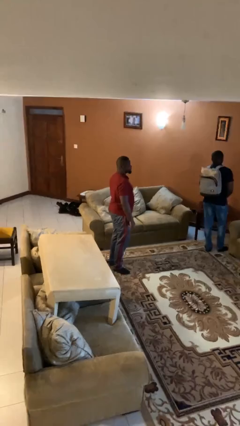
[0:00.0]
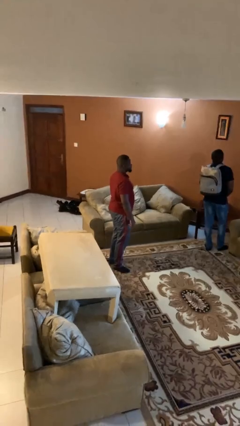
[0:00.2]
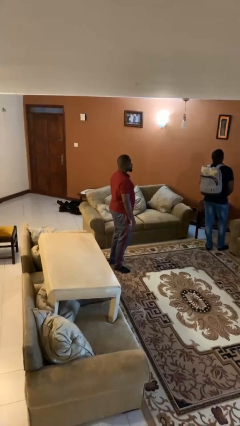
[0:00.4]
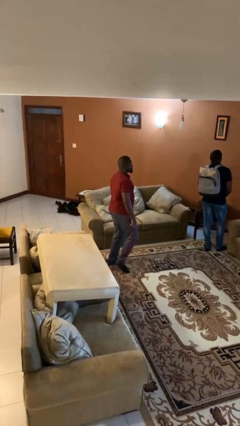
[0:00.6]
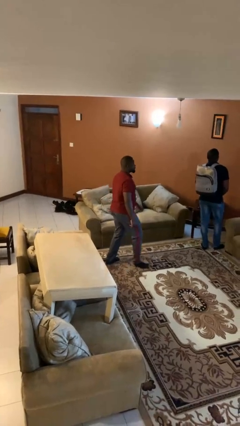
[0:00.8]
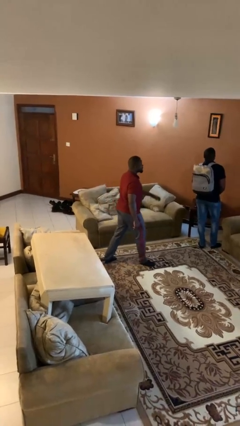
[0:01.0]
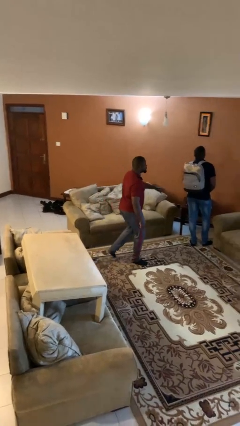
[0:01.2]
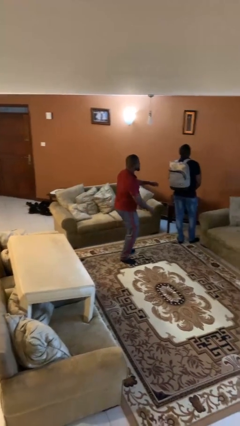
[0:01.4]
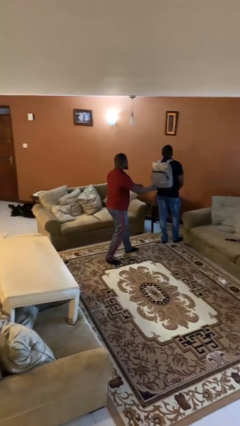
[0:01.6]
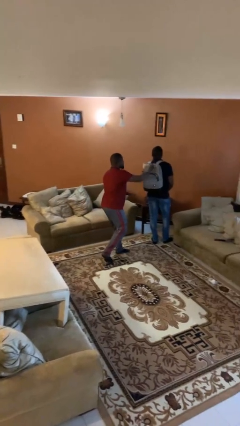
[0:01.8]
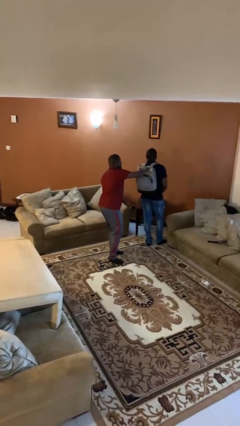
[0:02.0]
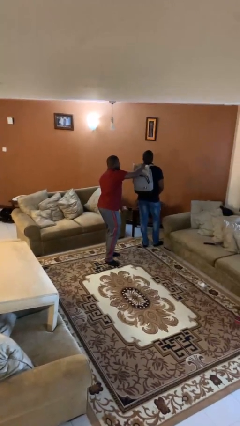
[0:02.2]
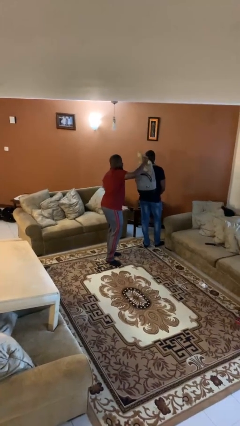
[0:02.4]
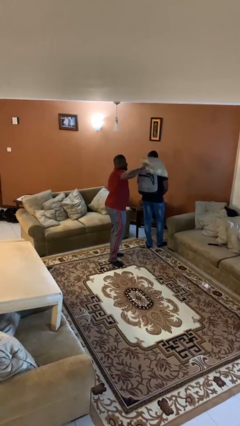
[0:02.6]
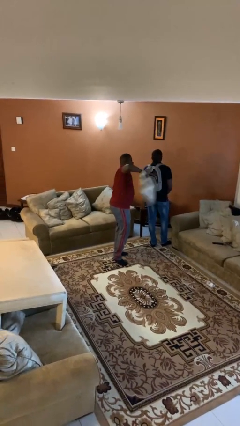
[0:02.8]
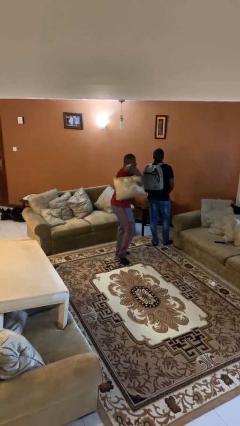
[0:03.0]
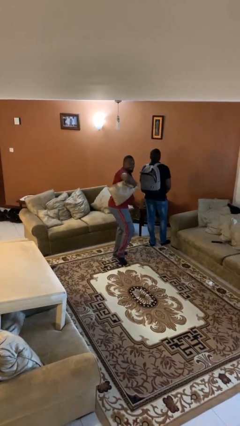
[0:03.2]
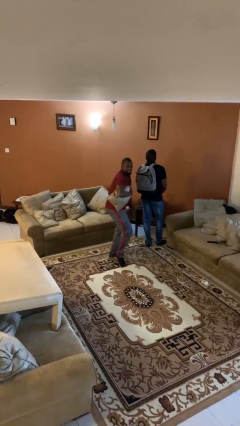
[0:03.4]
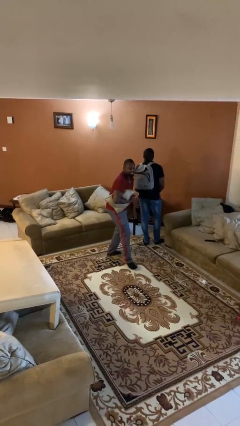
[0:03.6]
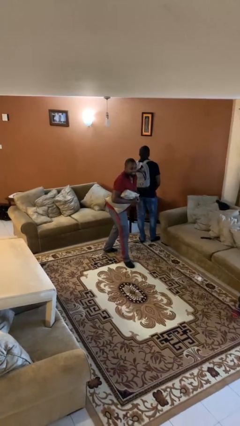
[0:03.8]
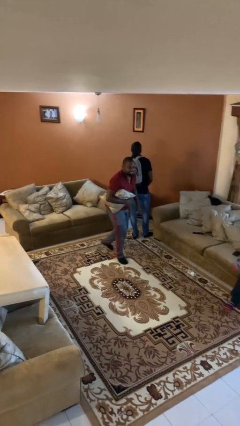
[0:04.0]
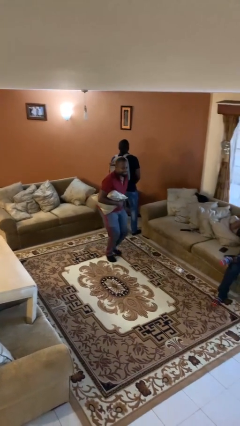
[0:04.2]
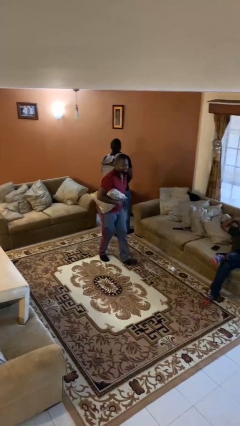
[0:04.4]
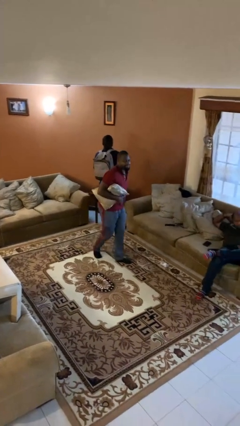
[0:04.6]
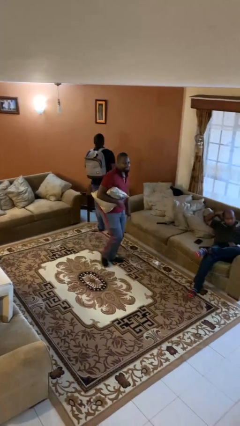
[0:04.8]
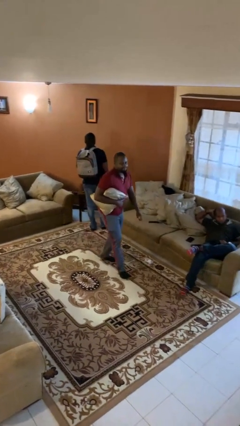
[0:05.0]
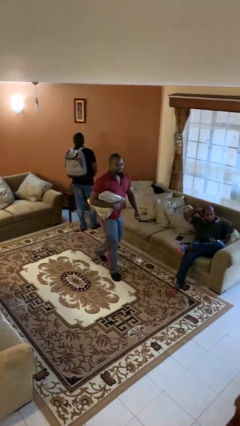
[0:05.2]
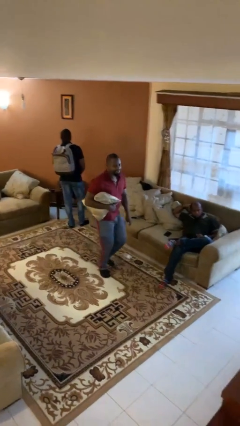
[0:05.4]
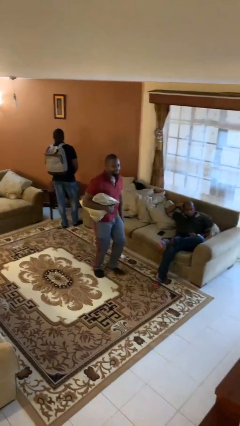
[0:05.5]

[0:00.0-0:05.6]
person steals object from person

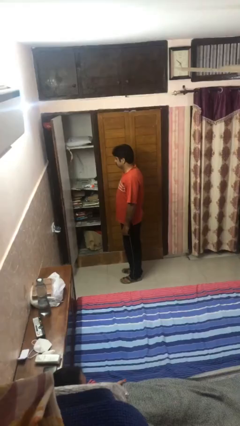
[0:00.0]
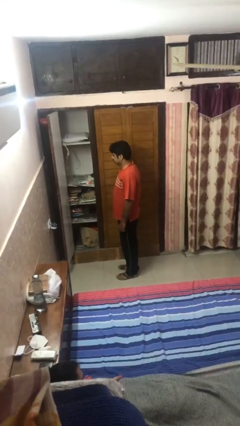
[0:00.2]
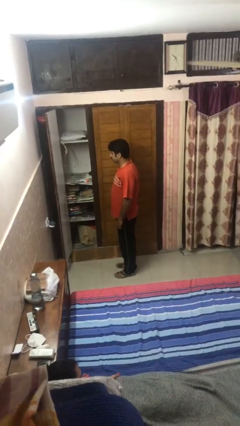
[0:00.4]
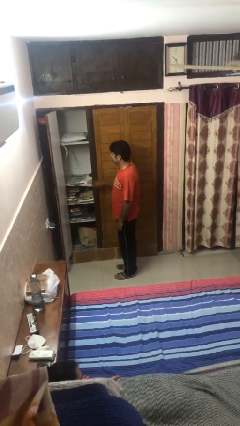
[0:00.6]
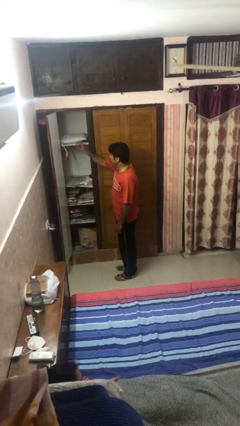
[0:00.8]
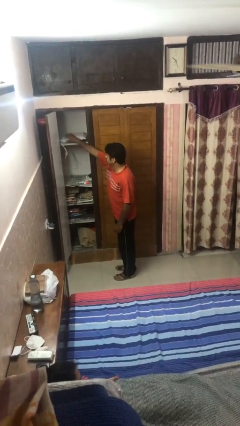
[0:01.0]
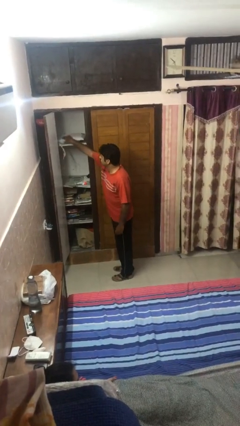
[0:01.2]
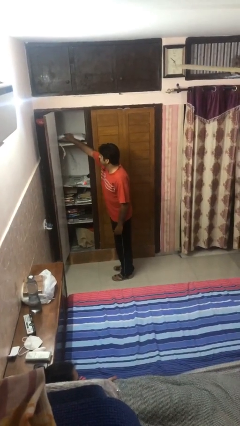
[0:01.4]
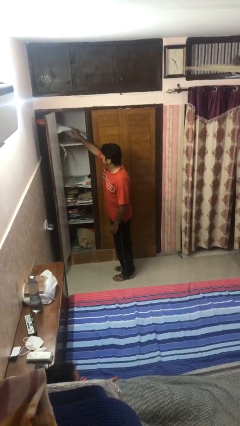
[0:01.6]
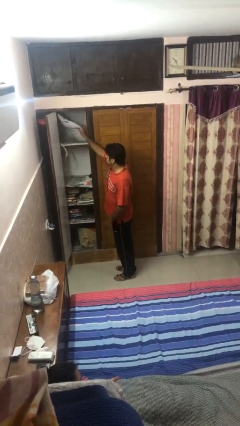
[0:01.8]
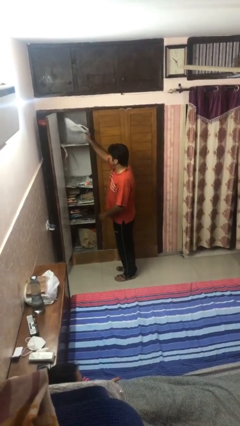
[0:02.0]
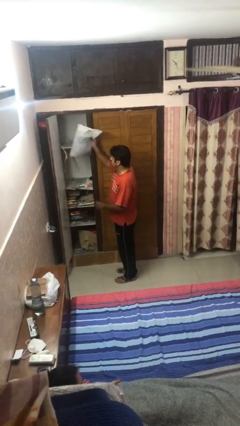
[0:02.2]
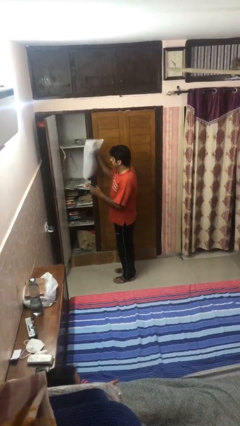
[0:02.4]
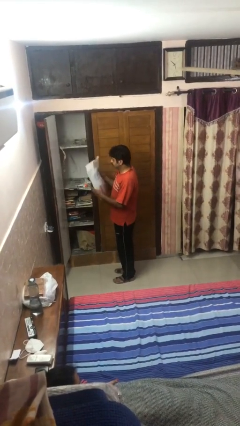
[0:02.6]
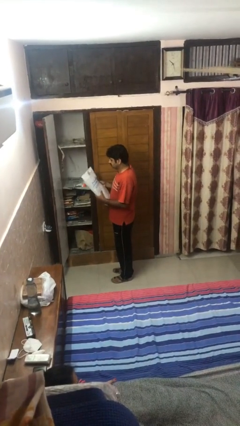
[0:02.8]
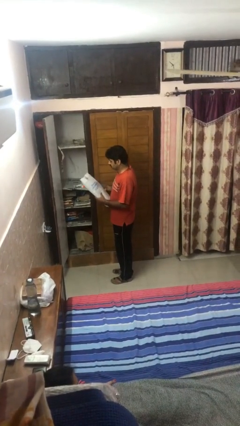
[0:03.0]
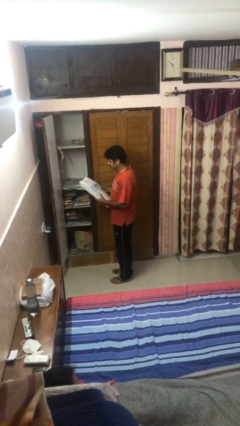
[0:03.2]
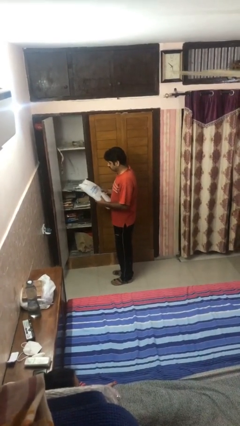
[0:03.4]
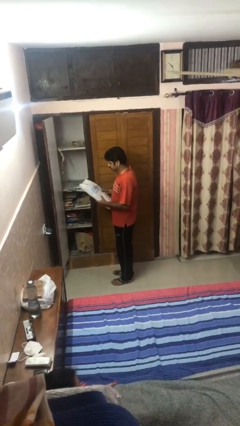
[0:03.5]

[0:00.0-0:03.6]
person picks up object from shelf

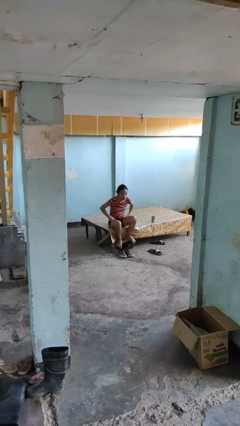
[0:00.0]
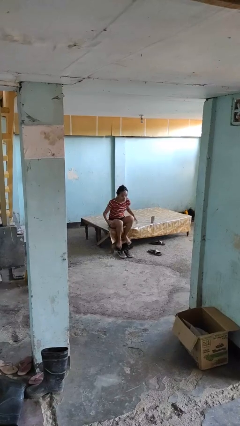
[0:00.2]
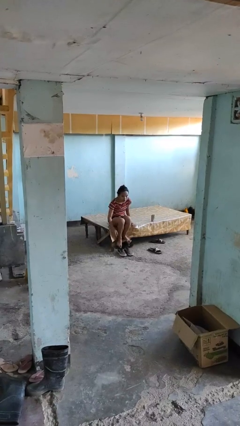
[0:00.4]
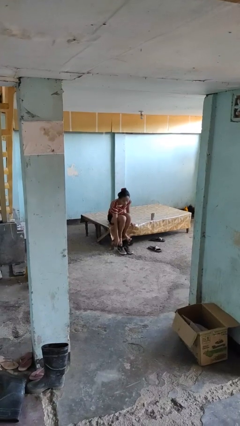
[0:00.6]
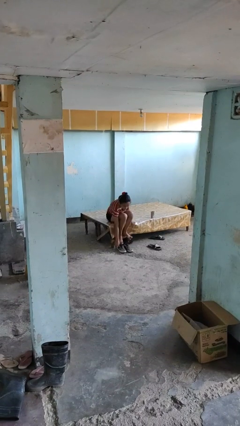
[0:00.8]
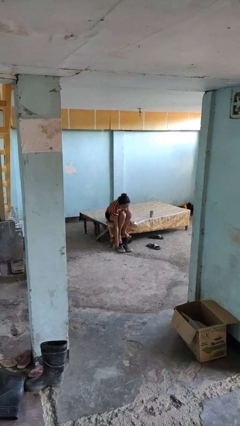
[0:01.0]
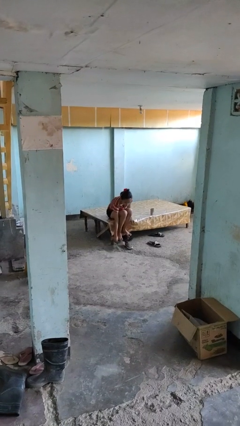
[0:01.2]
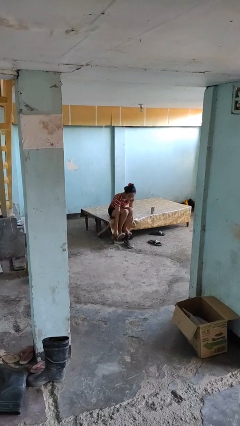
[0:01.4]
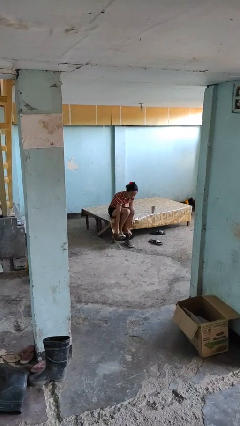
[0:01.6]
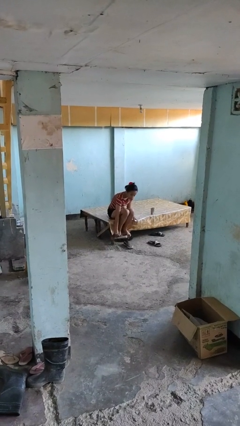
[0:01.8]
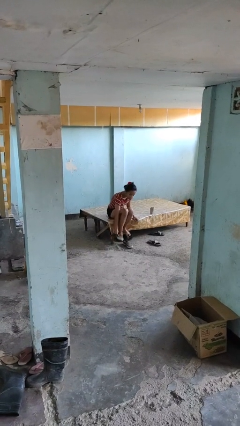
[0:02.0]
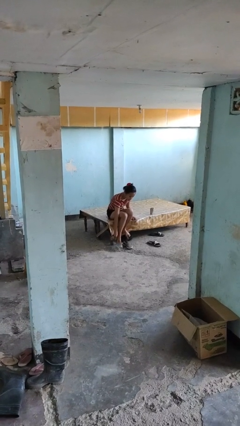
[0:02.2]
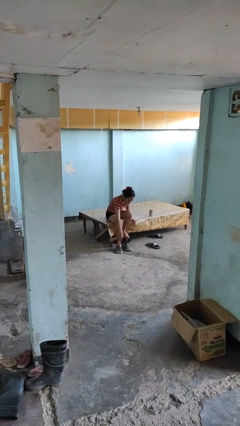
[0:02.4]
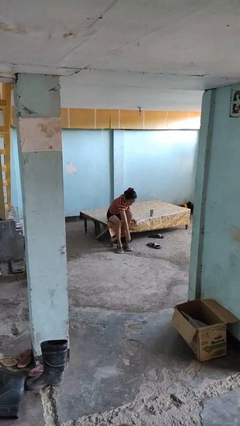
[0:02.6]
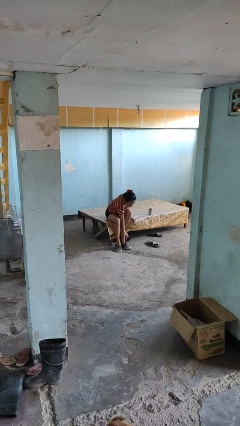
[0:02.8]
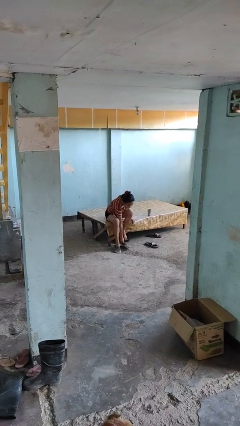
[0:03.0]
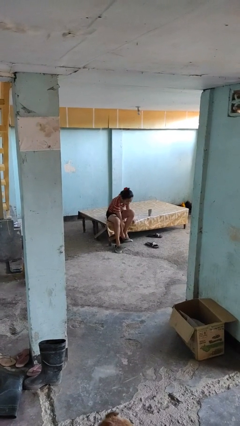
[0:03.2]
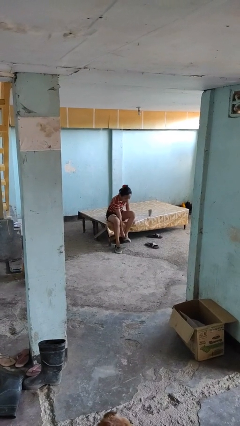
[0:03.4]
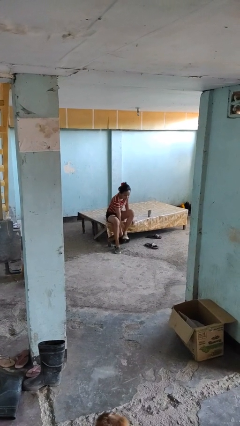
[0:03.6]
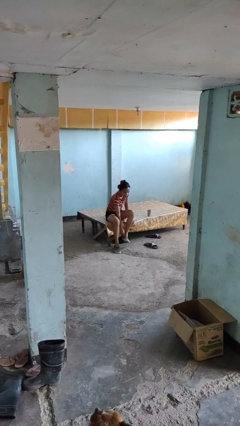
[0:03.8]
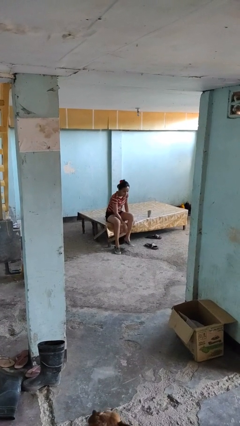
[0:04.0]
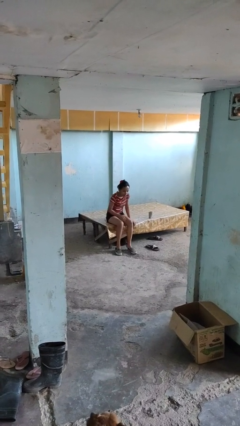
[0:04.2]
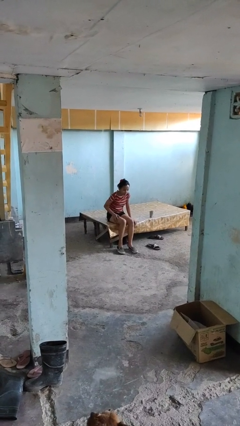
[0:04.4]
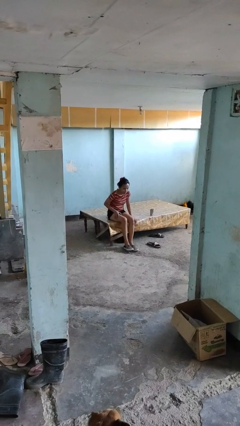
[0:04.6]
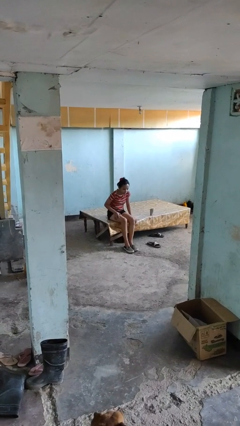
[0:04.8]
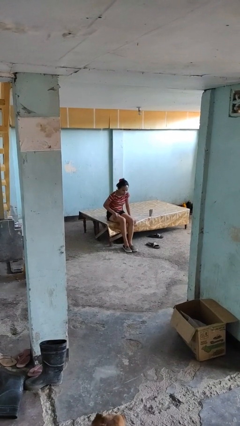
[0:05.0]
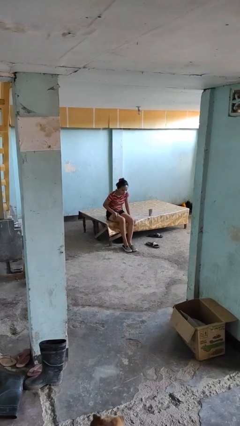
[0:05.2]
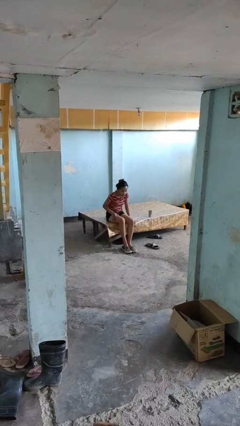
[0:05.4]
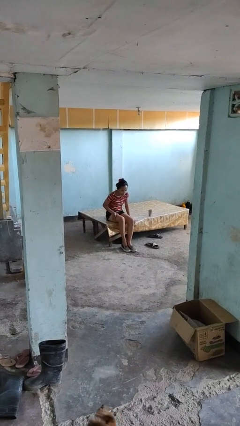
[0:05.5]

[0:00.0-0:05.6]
person puts on shoes

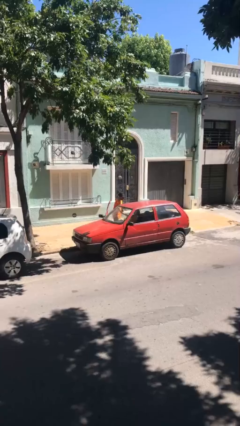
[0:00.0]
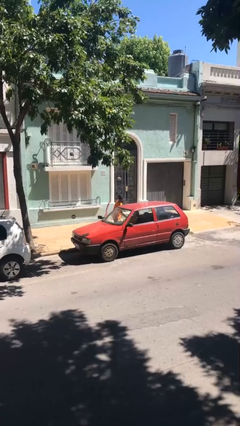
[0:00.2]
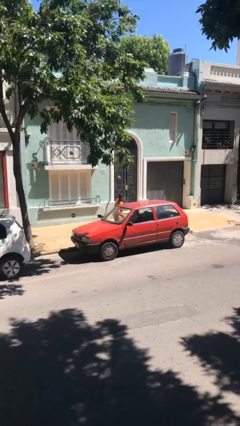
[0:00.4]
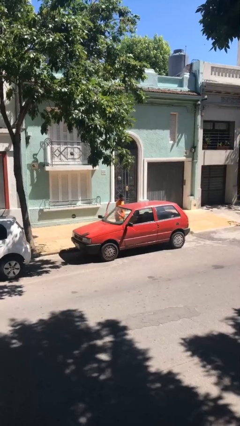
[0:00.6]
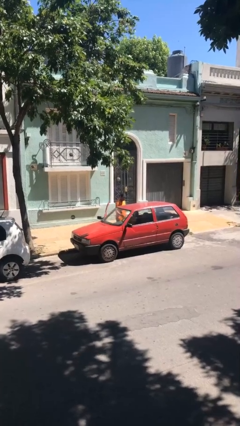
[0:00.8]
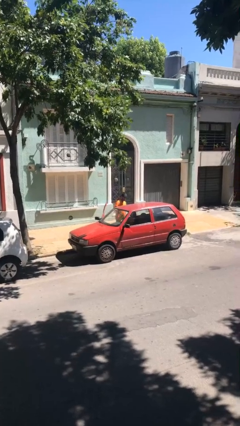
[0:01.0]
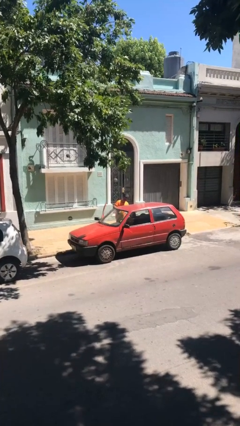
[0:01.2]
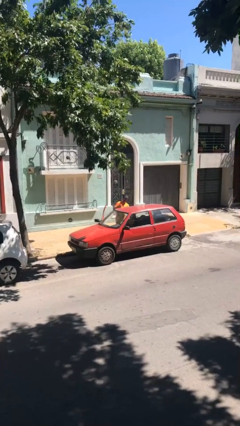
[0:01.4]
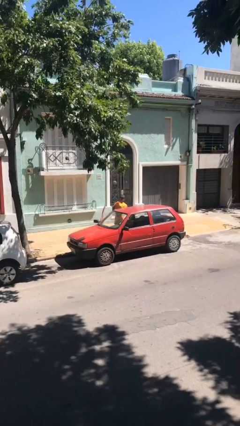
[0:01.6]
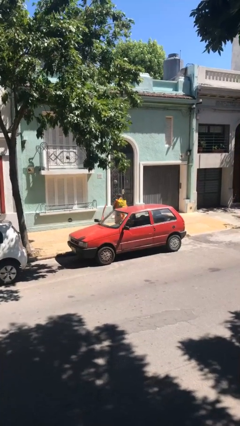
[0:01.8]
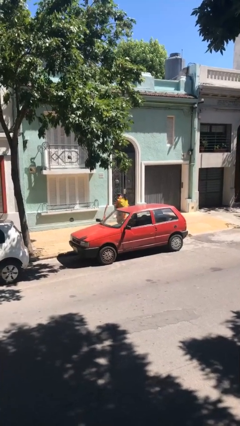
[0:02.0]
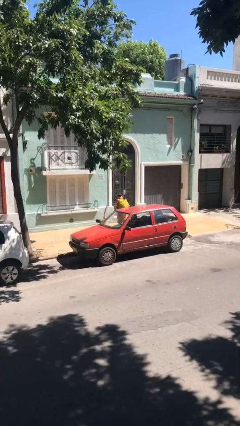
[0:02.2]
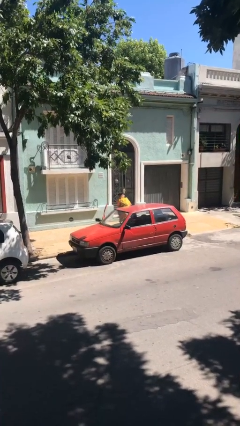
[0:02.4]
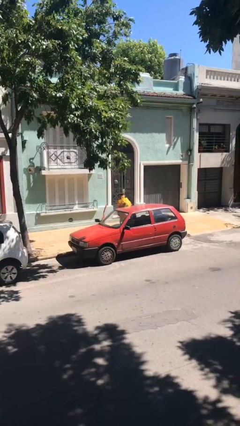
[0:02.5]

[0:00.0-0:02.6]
person unloads car

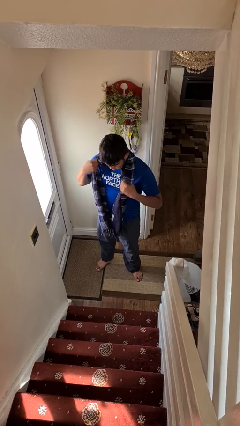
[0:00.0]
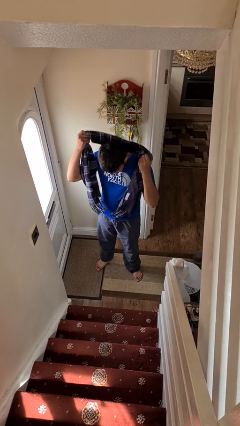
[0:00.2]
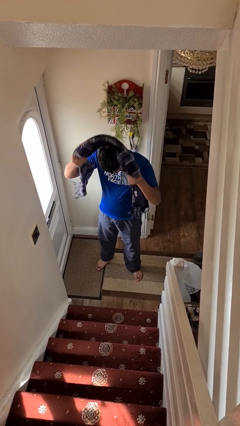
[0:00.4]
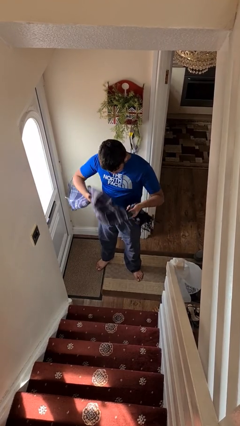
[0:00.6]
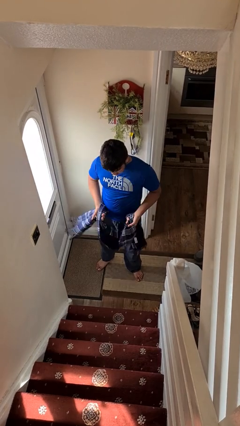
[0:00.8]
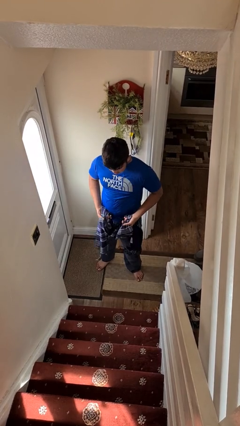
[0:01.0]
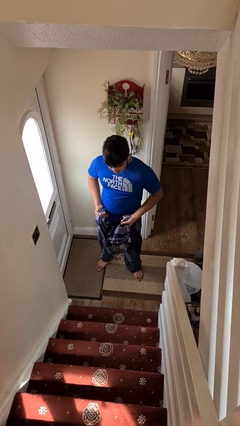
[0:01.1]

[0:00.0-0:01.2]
person takes off scarf
